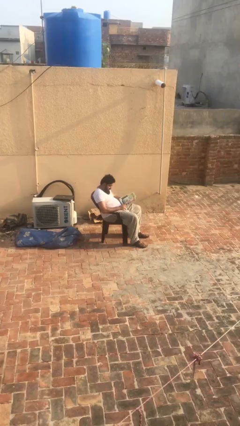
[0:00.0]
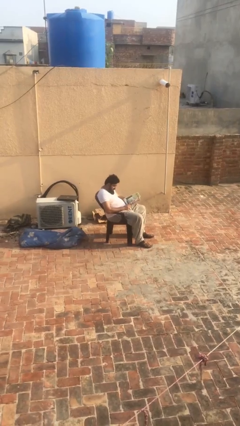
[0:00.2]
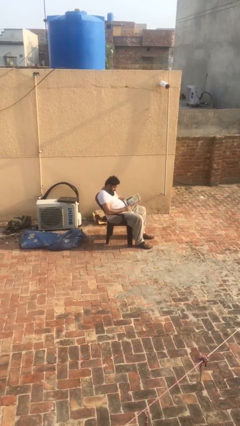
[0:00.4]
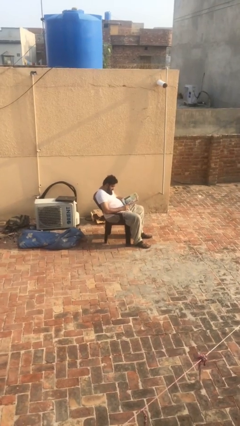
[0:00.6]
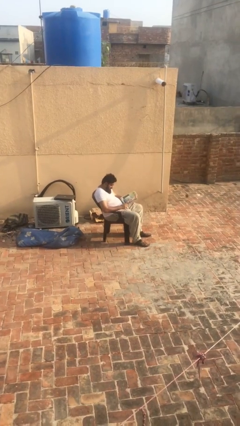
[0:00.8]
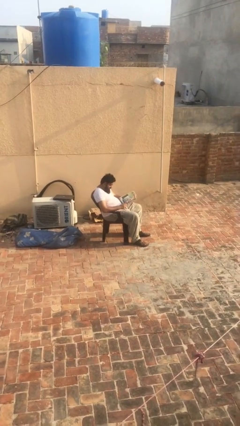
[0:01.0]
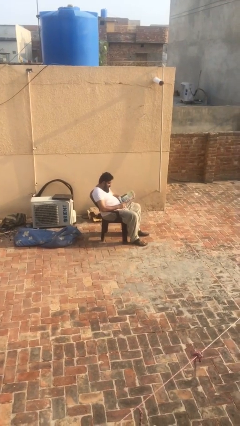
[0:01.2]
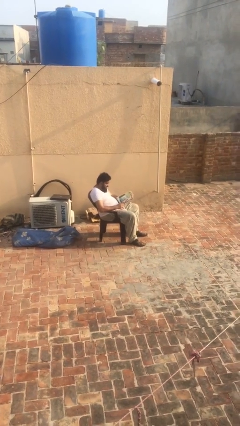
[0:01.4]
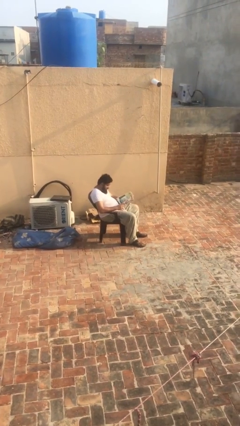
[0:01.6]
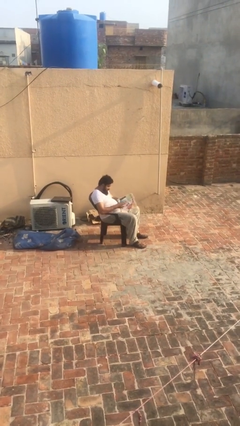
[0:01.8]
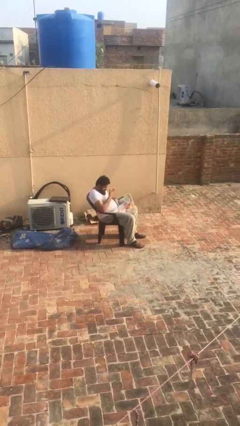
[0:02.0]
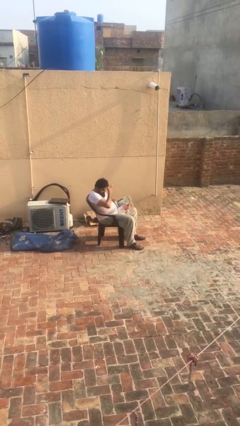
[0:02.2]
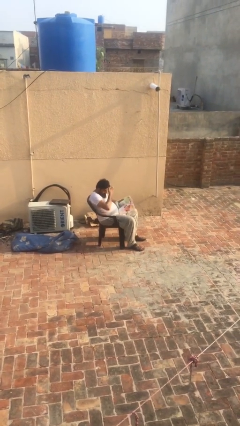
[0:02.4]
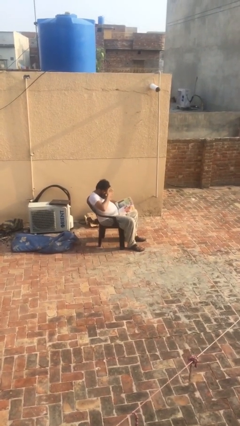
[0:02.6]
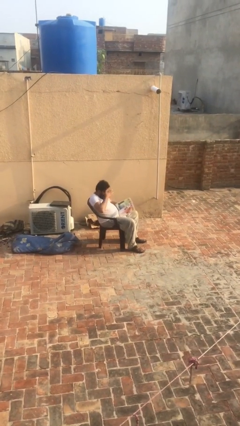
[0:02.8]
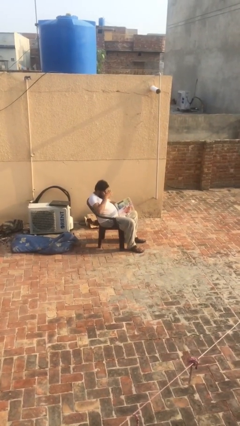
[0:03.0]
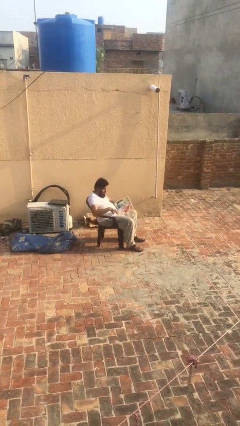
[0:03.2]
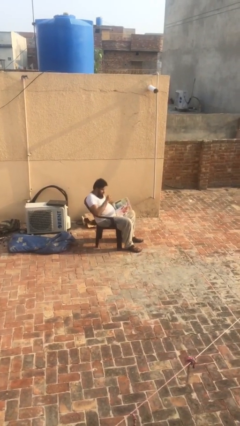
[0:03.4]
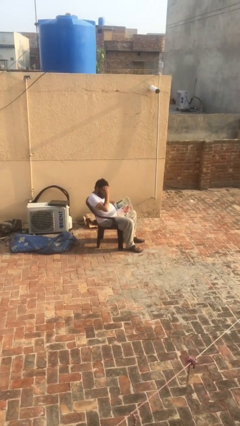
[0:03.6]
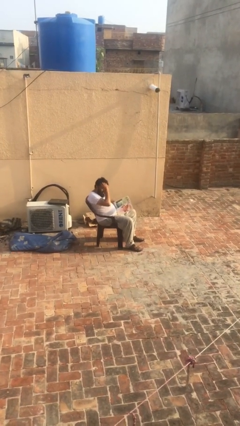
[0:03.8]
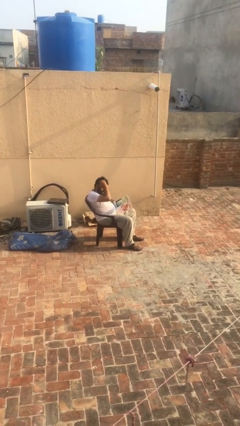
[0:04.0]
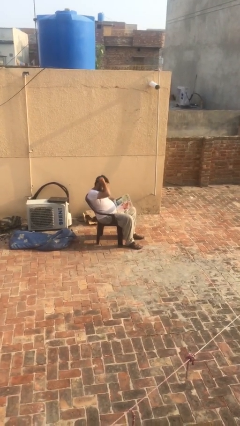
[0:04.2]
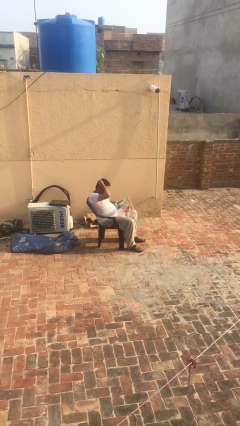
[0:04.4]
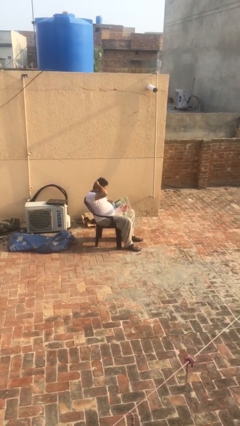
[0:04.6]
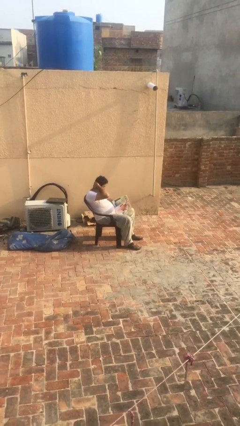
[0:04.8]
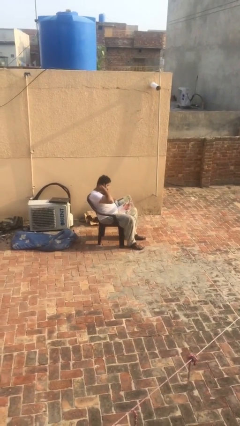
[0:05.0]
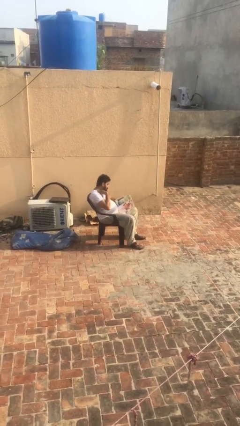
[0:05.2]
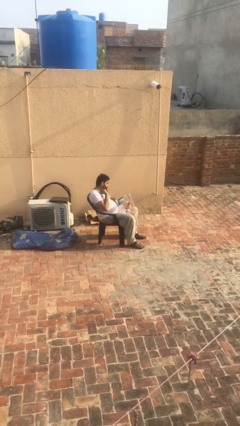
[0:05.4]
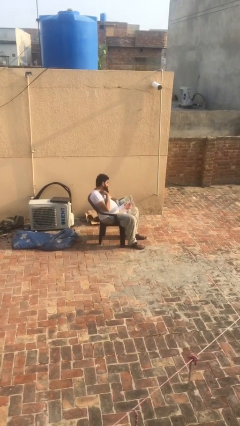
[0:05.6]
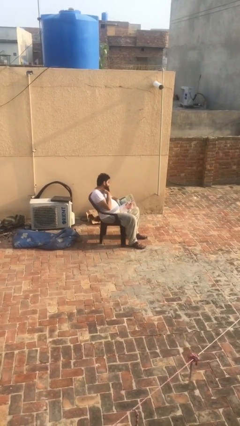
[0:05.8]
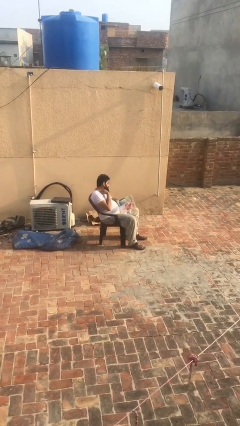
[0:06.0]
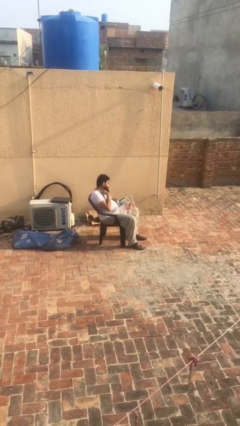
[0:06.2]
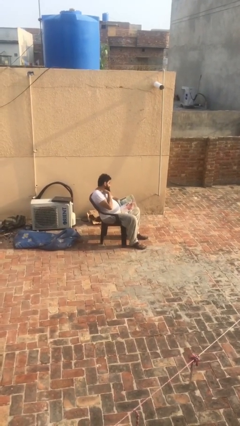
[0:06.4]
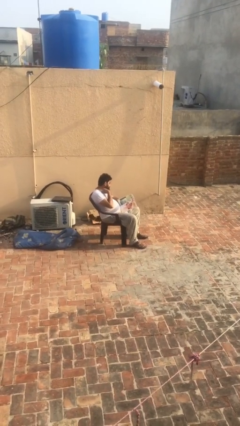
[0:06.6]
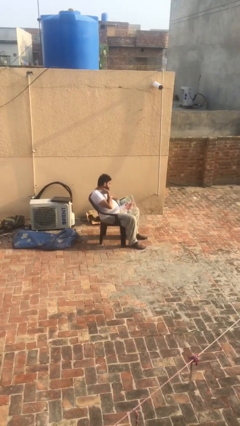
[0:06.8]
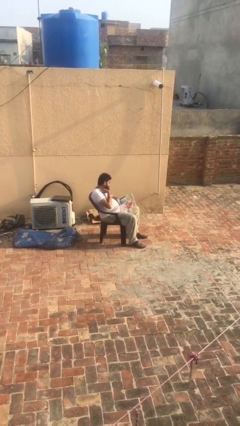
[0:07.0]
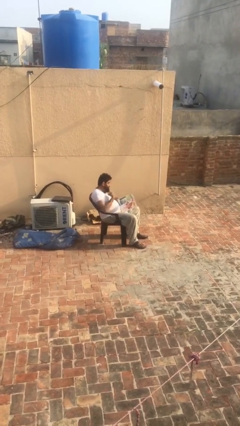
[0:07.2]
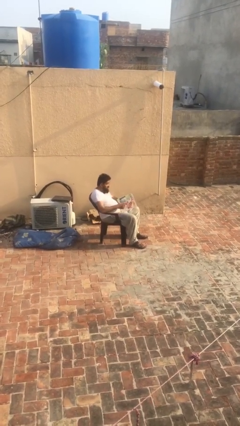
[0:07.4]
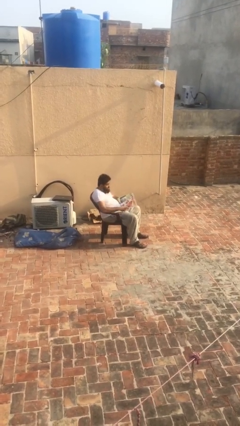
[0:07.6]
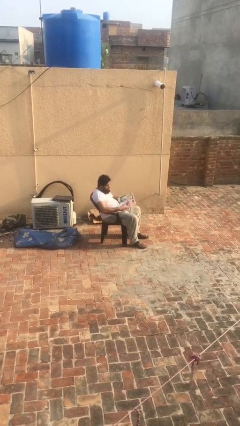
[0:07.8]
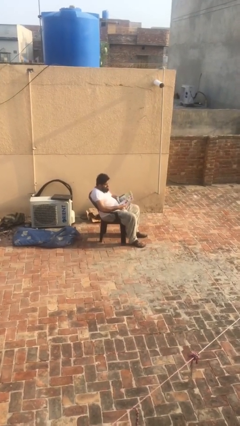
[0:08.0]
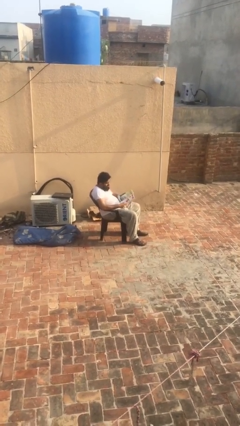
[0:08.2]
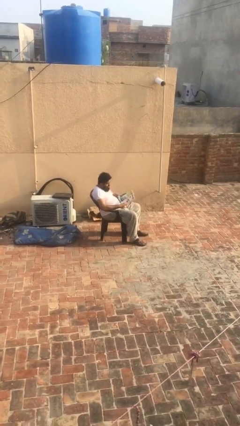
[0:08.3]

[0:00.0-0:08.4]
person reads document

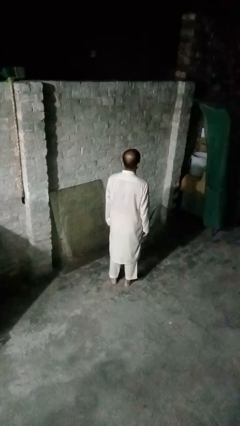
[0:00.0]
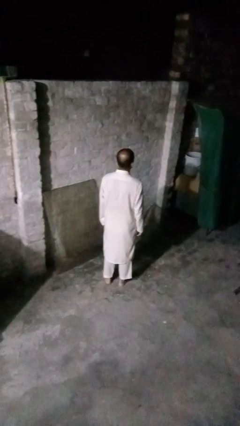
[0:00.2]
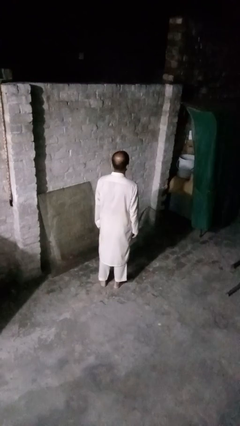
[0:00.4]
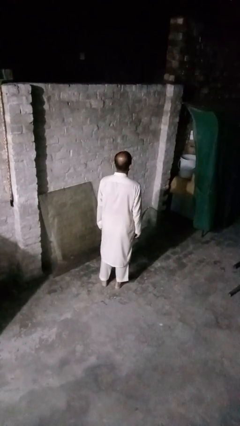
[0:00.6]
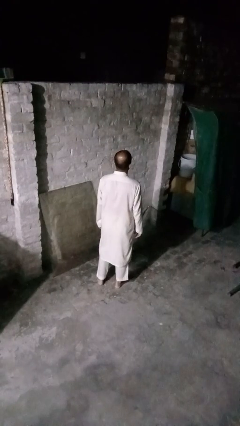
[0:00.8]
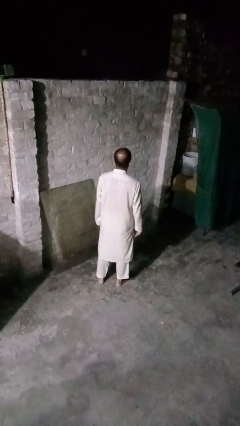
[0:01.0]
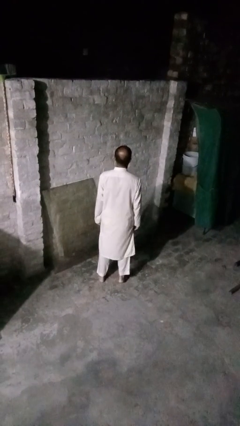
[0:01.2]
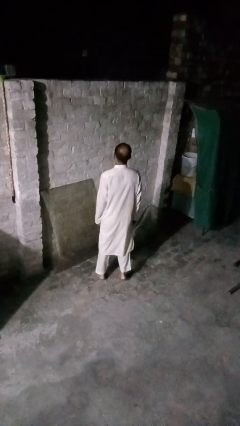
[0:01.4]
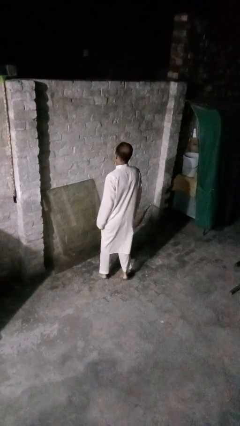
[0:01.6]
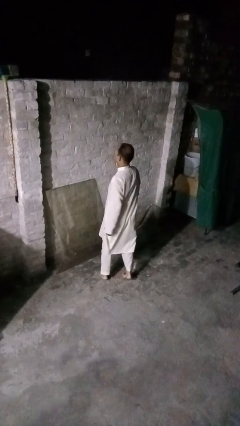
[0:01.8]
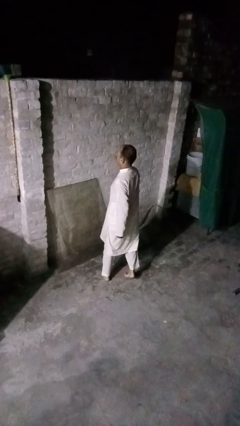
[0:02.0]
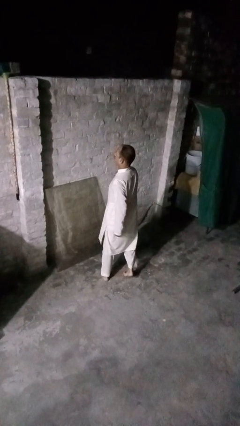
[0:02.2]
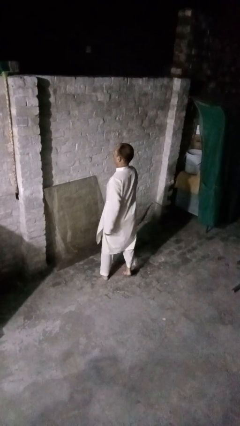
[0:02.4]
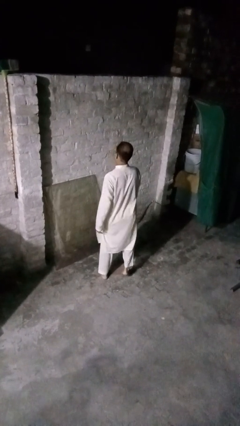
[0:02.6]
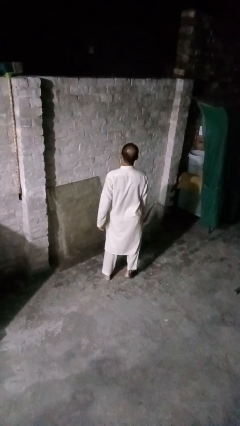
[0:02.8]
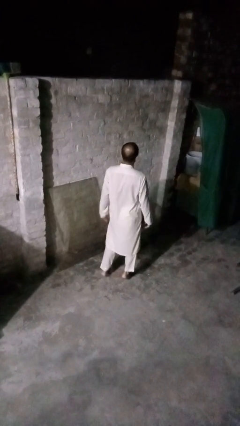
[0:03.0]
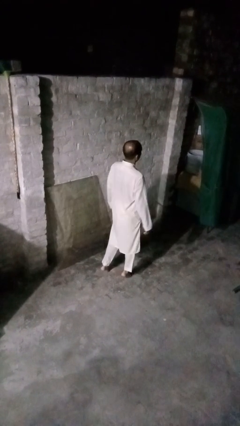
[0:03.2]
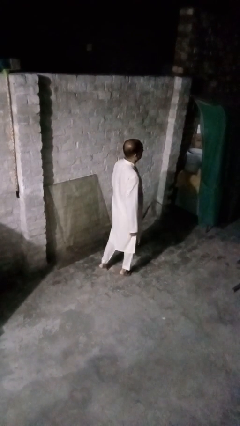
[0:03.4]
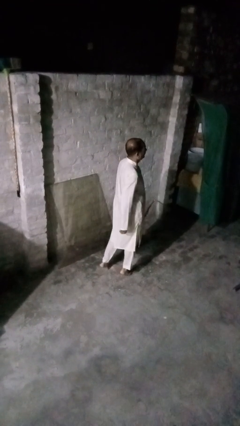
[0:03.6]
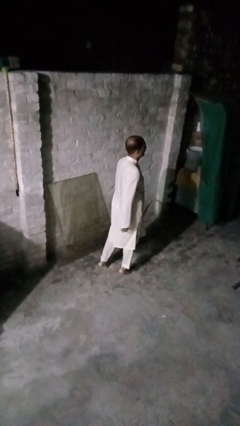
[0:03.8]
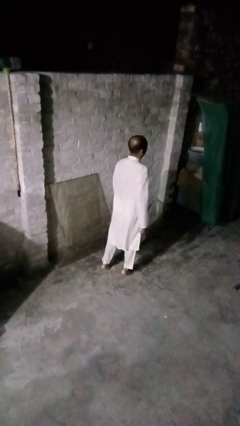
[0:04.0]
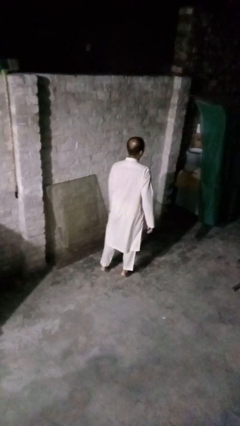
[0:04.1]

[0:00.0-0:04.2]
person twirls

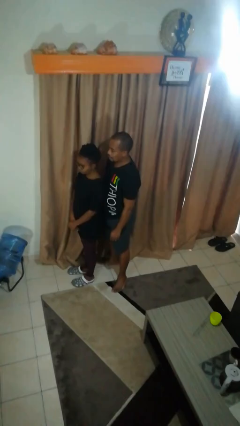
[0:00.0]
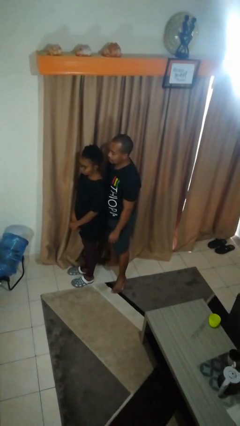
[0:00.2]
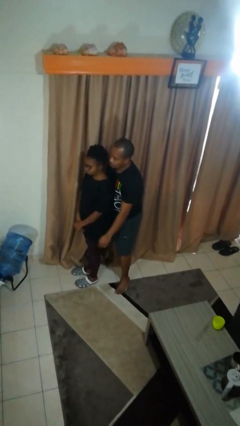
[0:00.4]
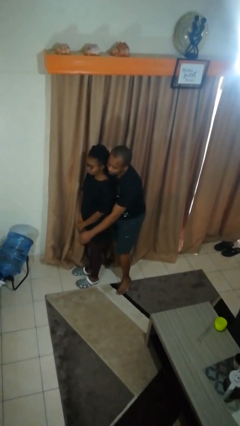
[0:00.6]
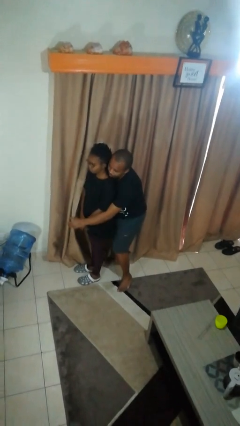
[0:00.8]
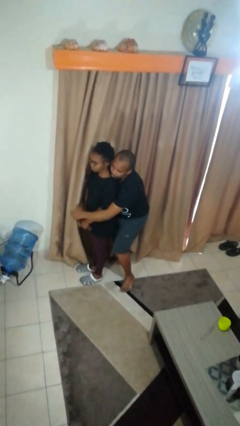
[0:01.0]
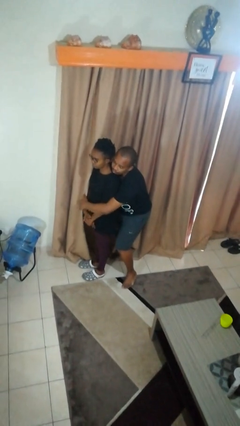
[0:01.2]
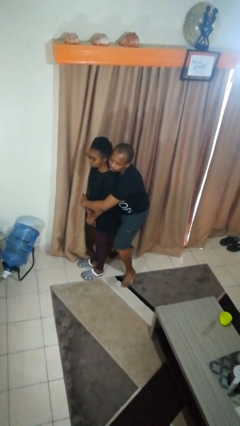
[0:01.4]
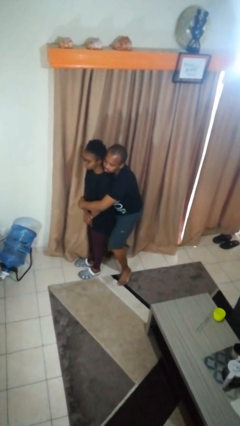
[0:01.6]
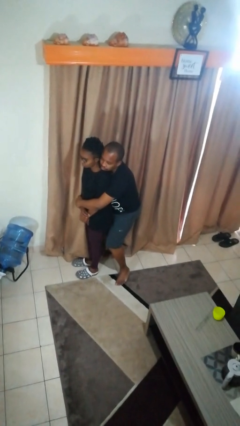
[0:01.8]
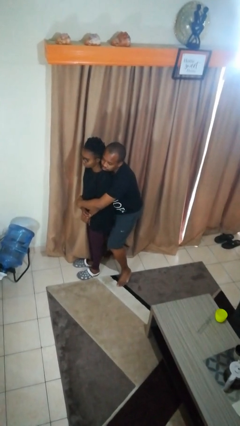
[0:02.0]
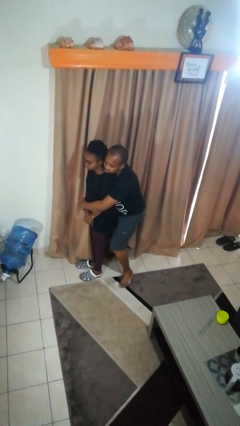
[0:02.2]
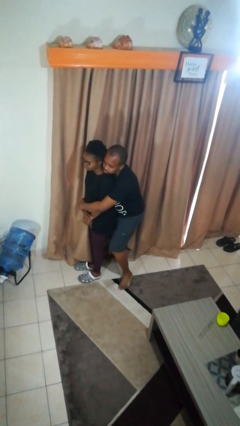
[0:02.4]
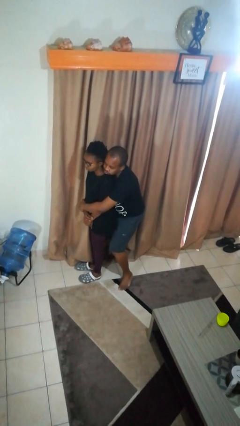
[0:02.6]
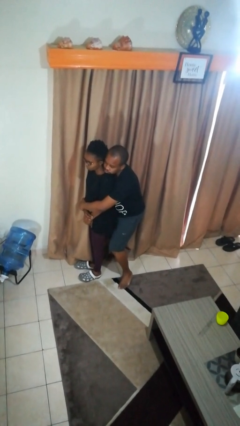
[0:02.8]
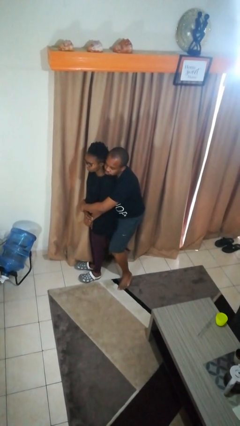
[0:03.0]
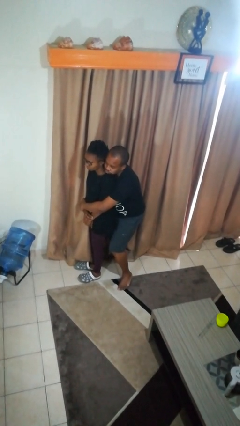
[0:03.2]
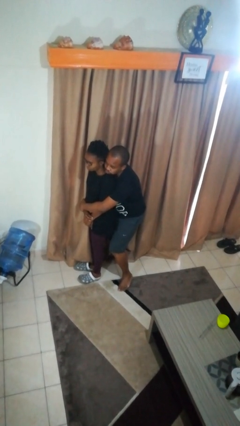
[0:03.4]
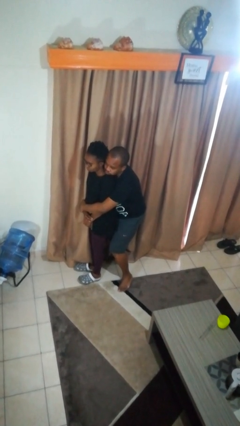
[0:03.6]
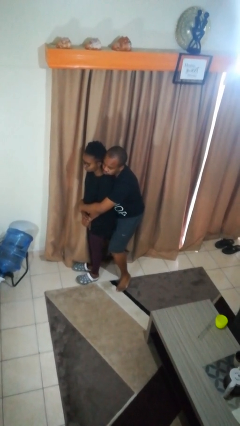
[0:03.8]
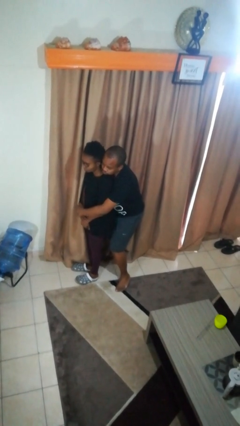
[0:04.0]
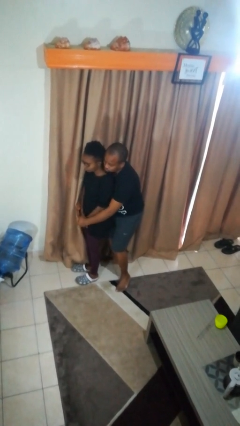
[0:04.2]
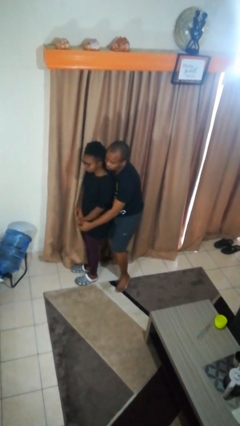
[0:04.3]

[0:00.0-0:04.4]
person hugs person from behind

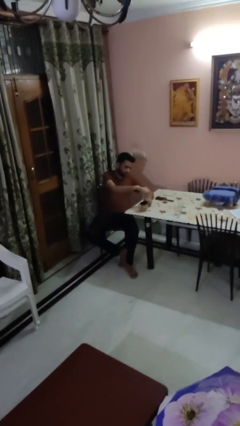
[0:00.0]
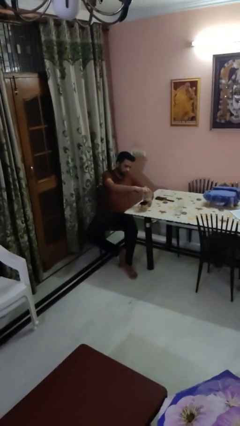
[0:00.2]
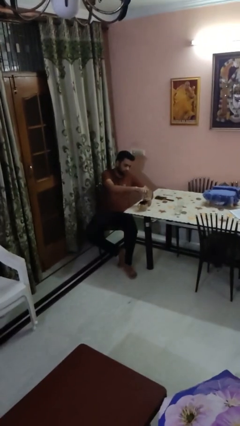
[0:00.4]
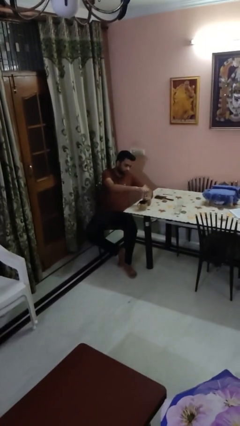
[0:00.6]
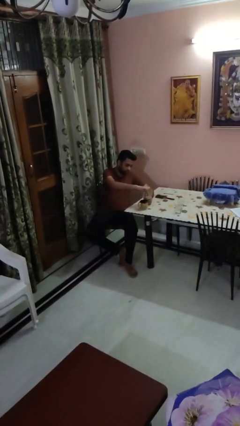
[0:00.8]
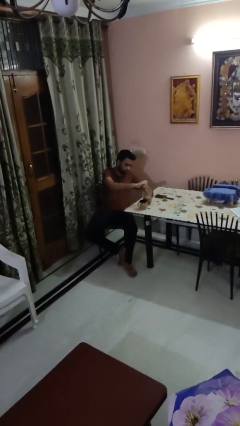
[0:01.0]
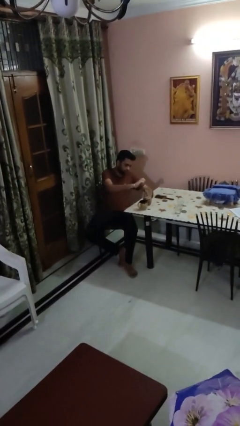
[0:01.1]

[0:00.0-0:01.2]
person unscrews lid from bottle
